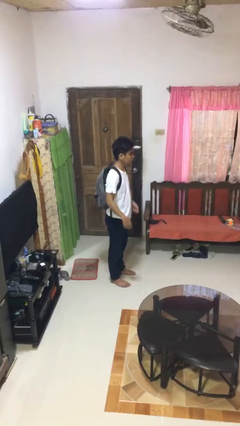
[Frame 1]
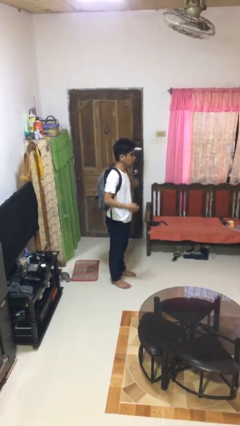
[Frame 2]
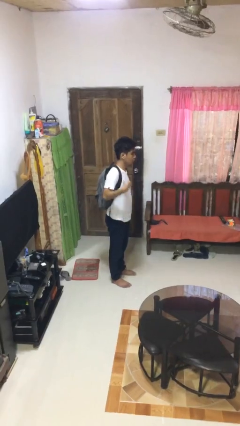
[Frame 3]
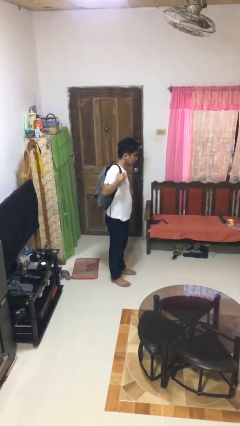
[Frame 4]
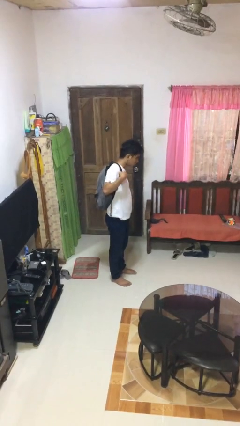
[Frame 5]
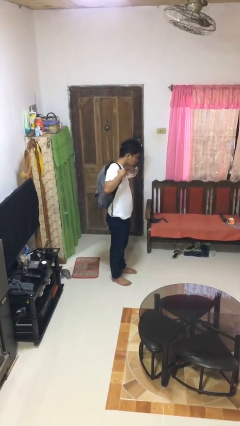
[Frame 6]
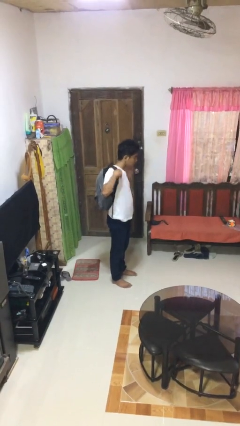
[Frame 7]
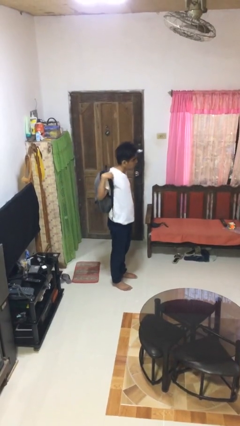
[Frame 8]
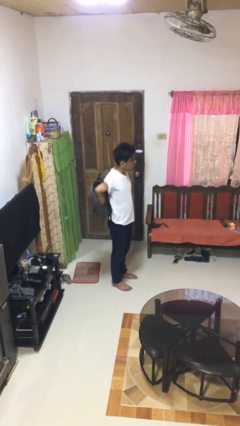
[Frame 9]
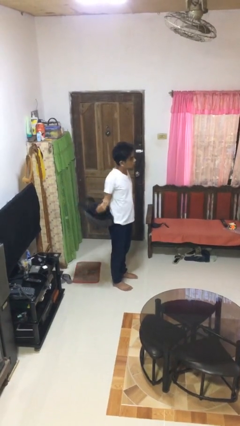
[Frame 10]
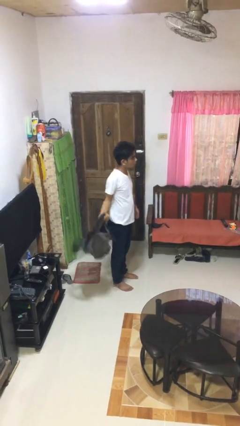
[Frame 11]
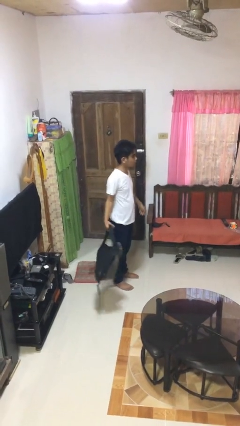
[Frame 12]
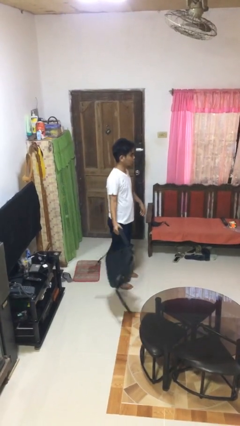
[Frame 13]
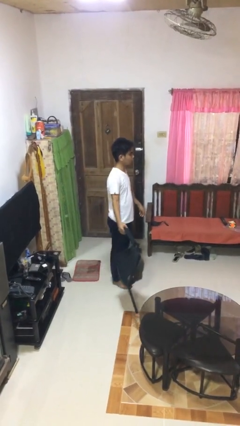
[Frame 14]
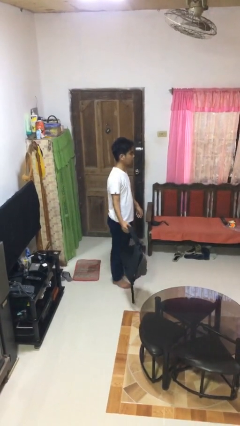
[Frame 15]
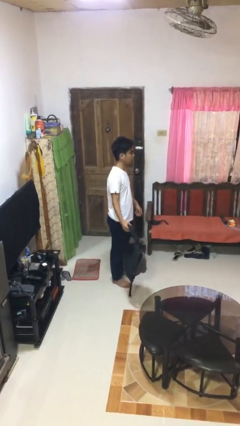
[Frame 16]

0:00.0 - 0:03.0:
person takes off backpack

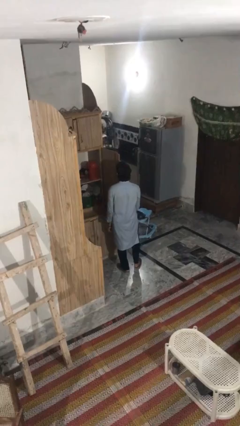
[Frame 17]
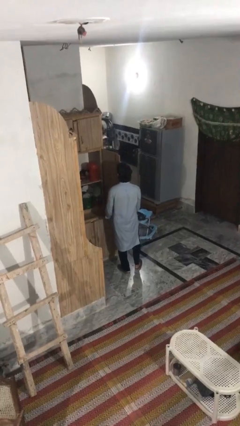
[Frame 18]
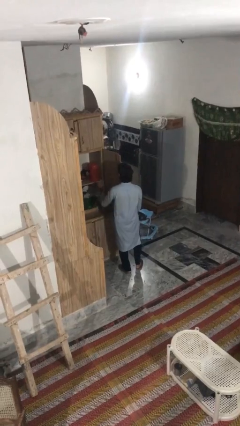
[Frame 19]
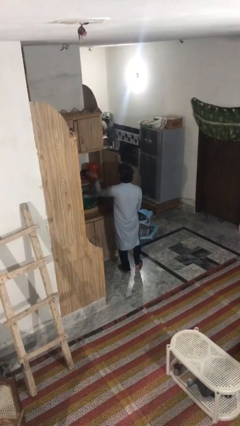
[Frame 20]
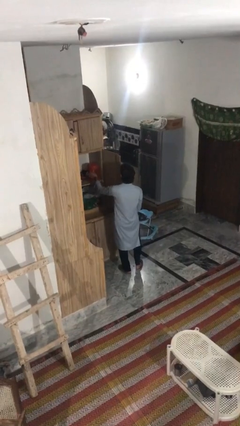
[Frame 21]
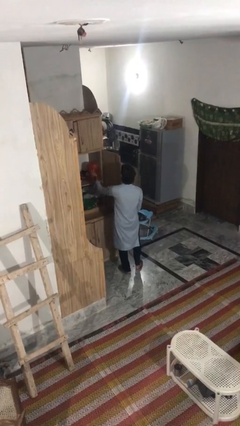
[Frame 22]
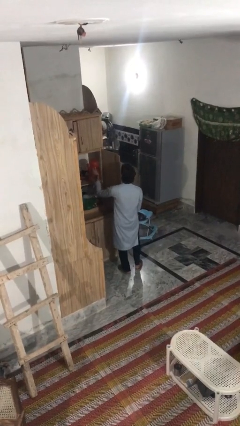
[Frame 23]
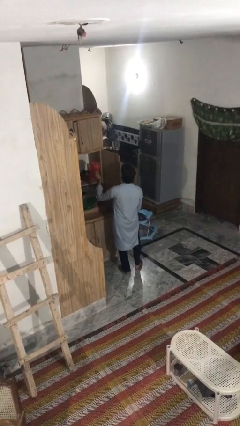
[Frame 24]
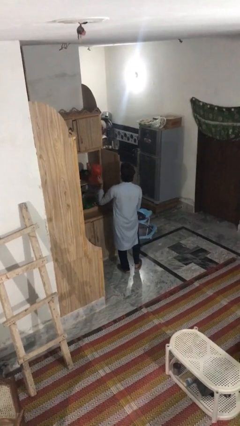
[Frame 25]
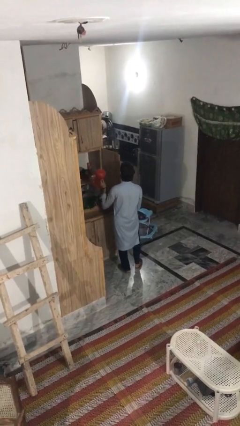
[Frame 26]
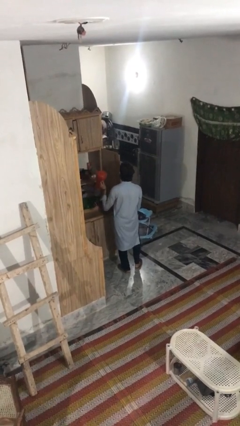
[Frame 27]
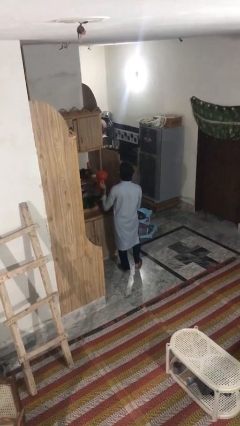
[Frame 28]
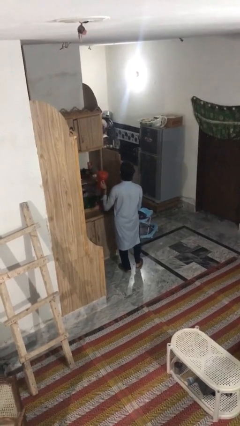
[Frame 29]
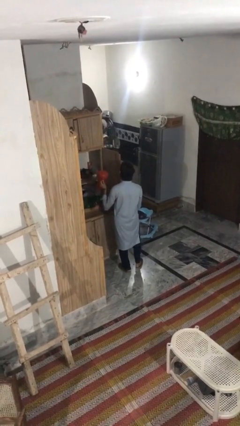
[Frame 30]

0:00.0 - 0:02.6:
person picks up object from cabinet

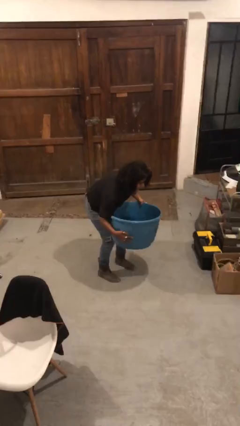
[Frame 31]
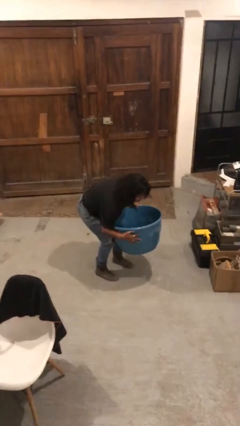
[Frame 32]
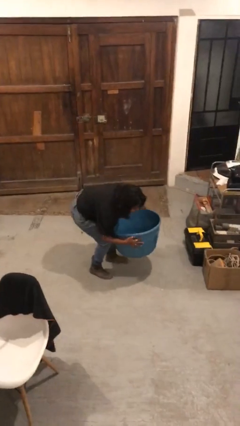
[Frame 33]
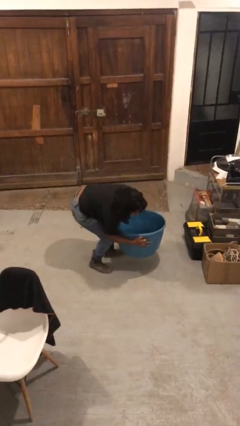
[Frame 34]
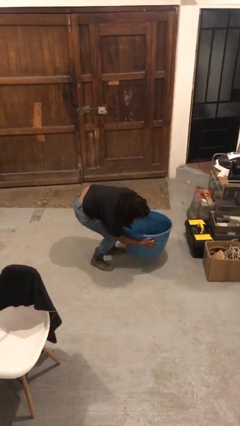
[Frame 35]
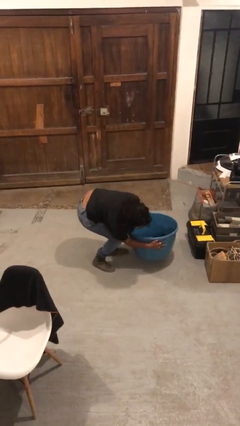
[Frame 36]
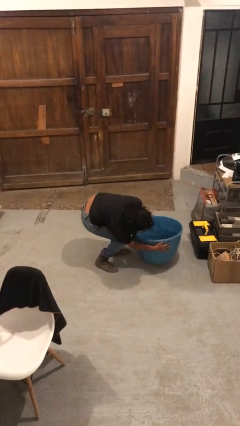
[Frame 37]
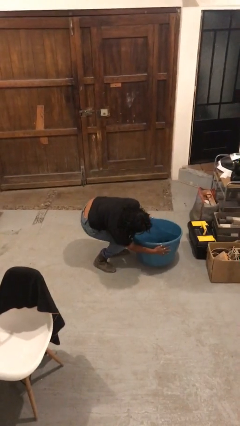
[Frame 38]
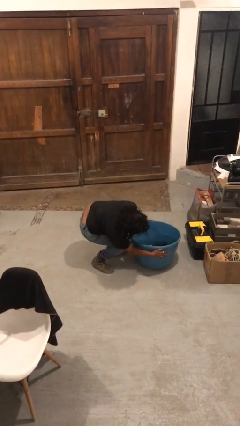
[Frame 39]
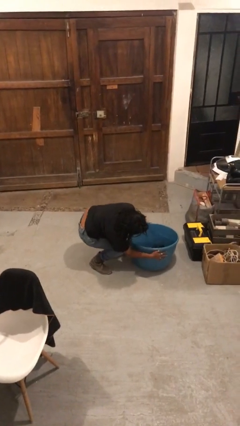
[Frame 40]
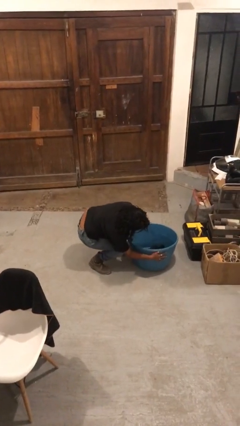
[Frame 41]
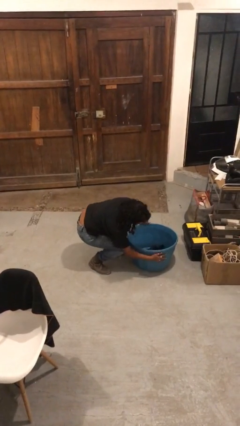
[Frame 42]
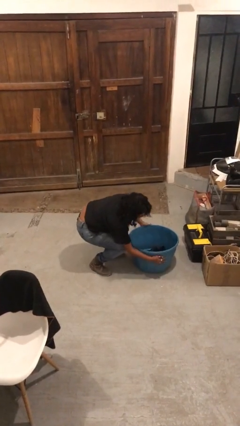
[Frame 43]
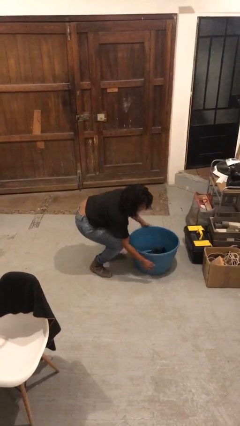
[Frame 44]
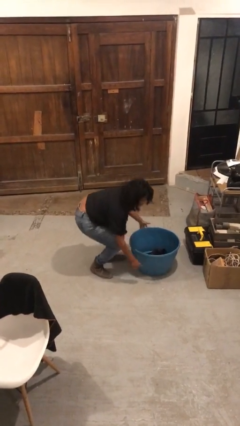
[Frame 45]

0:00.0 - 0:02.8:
person puts down object on floor

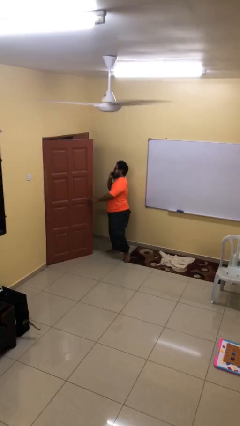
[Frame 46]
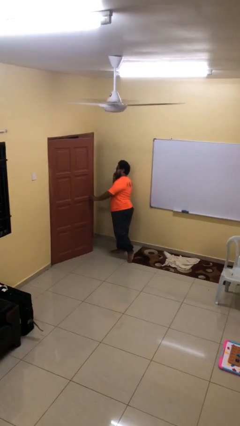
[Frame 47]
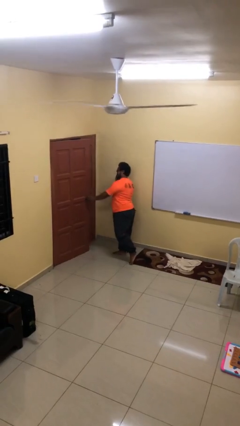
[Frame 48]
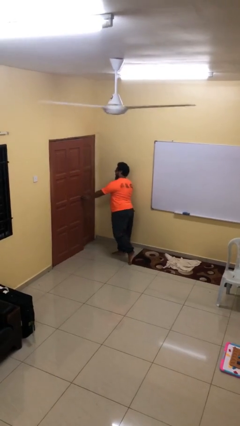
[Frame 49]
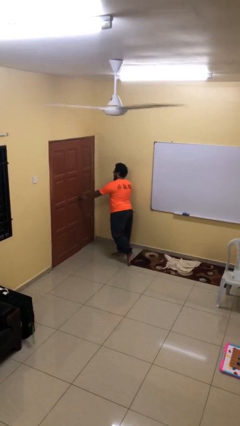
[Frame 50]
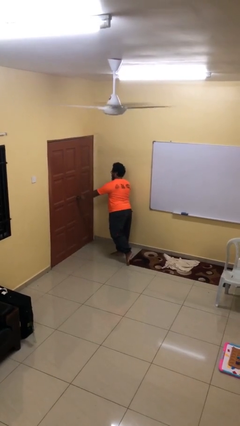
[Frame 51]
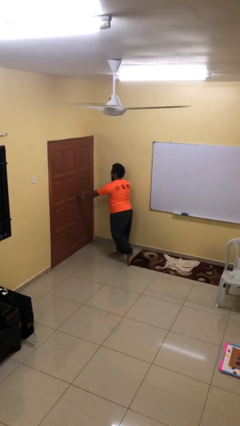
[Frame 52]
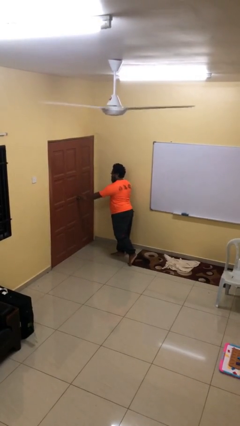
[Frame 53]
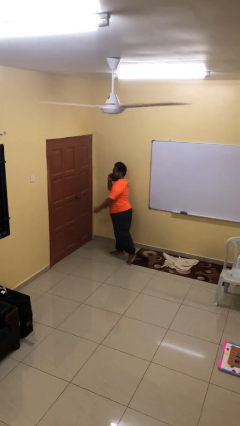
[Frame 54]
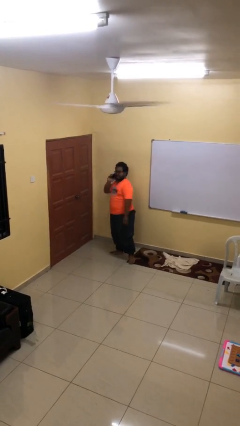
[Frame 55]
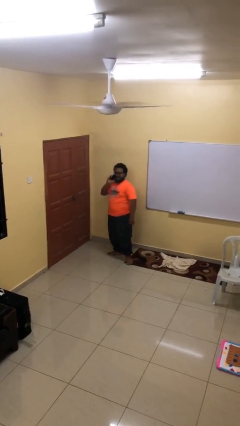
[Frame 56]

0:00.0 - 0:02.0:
person closes facility door

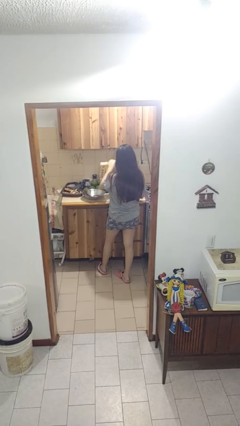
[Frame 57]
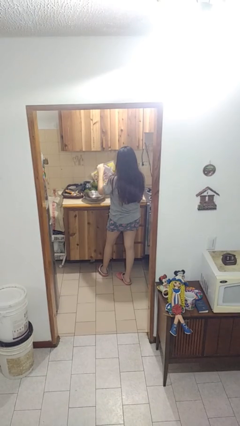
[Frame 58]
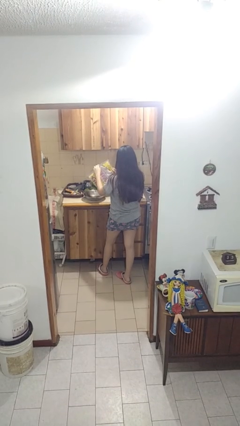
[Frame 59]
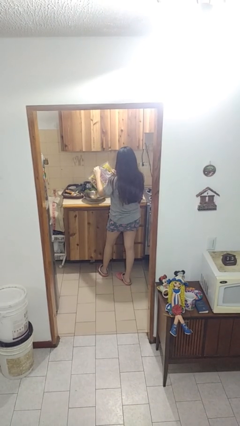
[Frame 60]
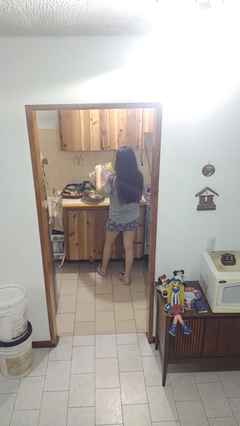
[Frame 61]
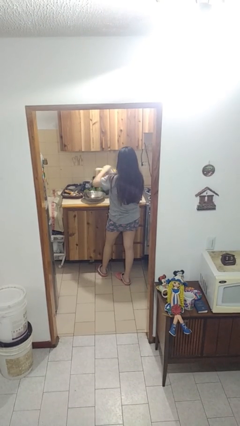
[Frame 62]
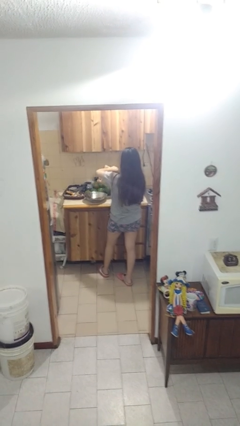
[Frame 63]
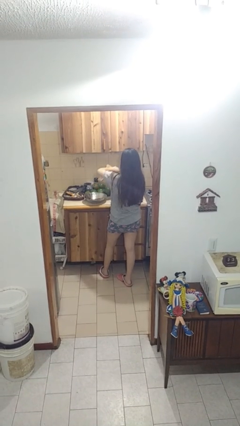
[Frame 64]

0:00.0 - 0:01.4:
person pours into bowl

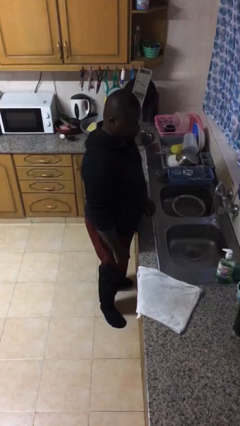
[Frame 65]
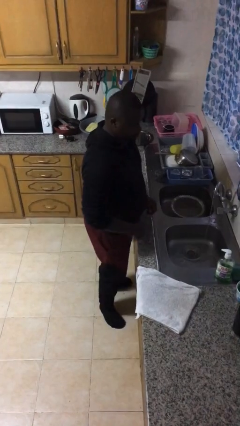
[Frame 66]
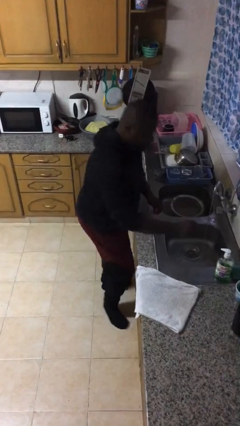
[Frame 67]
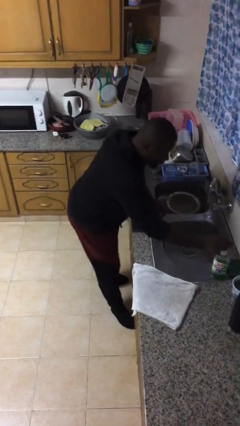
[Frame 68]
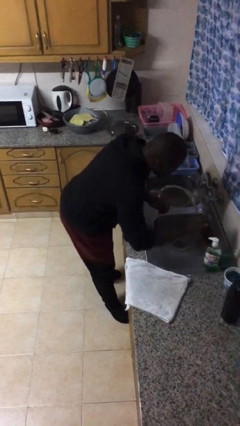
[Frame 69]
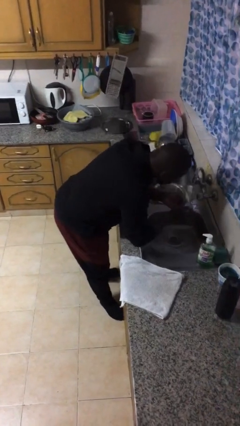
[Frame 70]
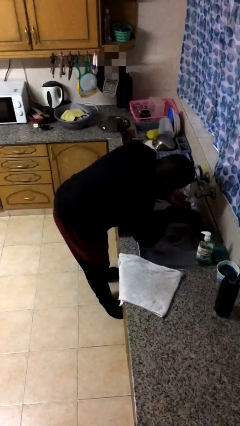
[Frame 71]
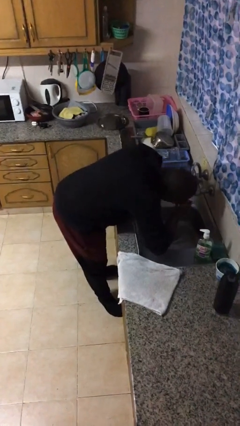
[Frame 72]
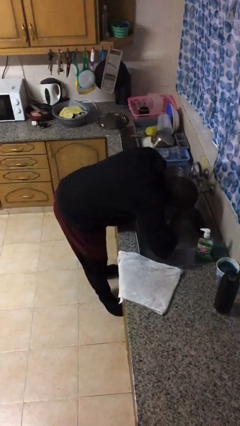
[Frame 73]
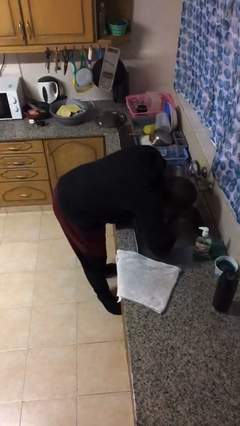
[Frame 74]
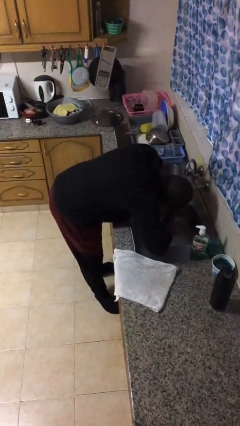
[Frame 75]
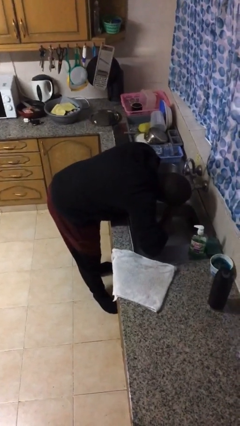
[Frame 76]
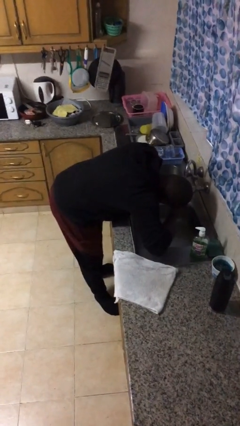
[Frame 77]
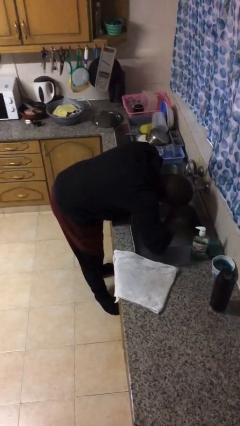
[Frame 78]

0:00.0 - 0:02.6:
person washes face

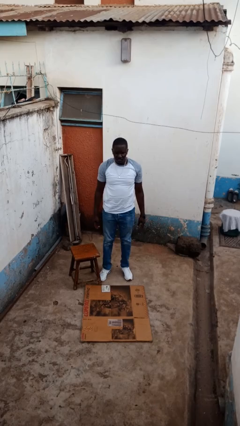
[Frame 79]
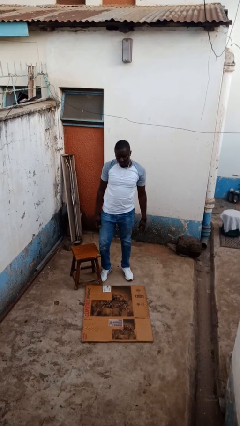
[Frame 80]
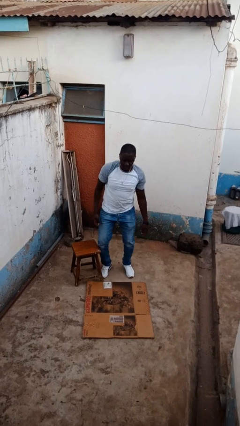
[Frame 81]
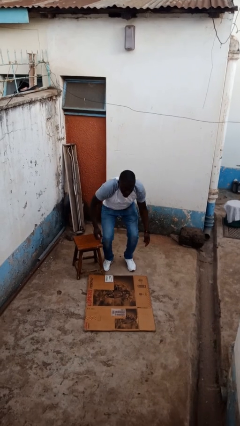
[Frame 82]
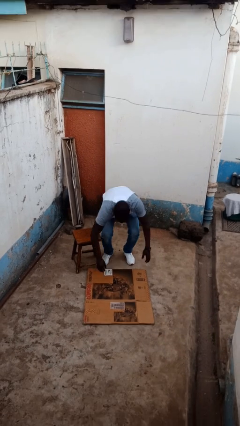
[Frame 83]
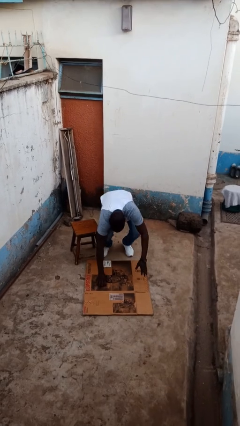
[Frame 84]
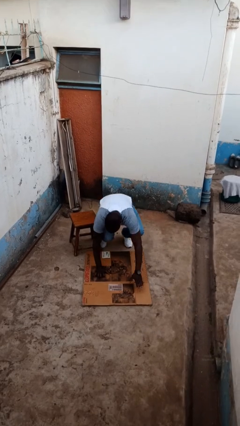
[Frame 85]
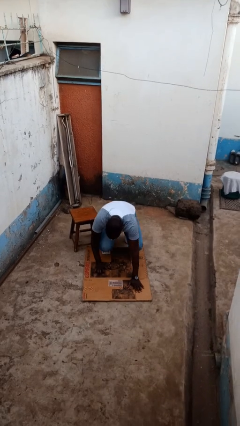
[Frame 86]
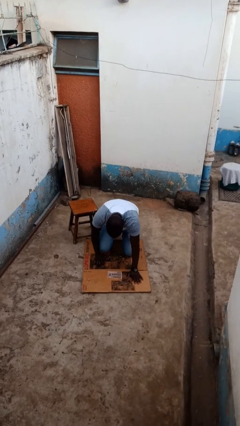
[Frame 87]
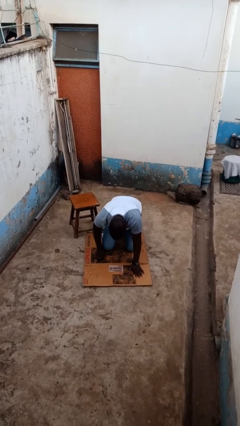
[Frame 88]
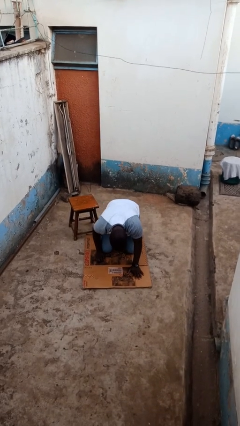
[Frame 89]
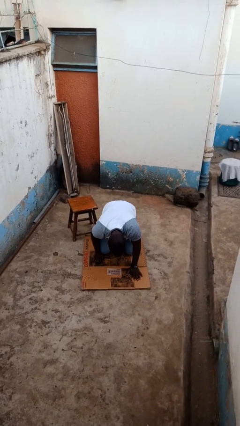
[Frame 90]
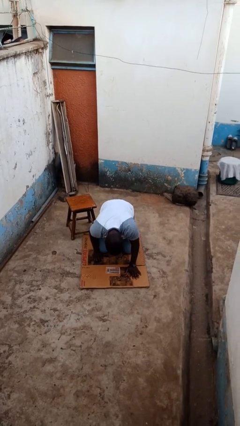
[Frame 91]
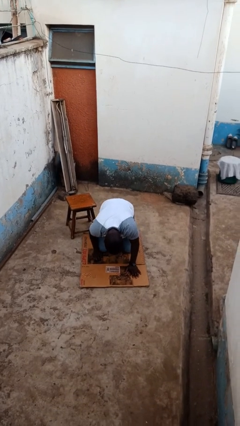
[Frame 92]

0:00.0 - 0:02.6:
person trips on object on floor

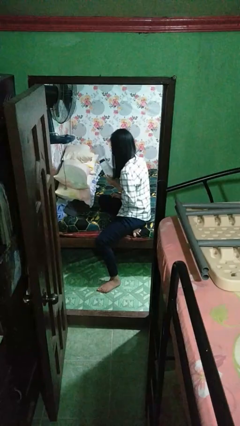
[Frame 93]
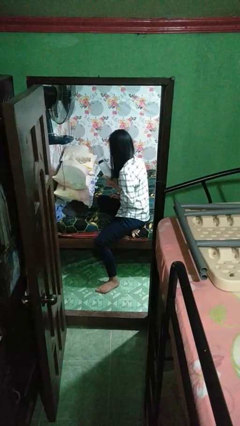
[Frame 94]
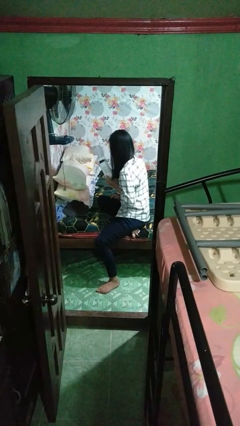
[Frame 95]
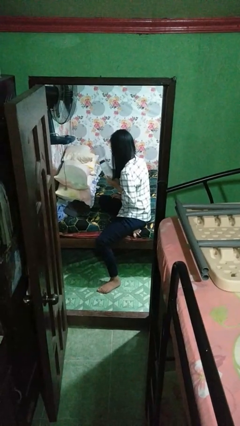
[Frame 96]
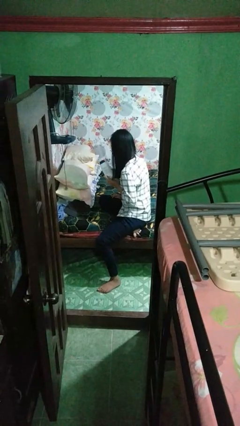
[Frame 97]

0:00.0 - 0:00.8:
person puts down object on bed
